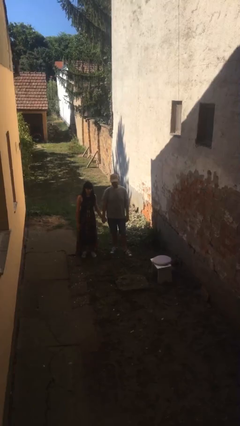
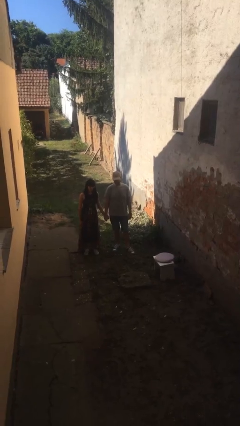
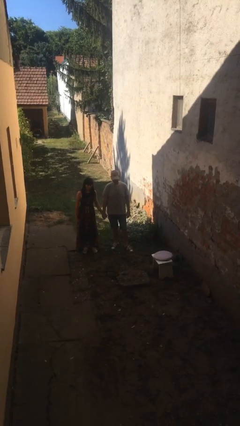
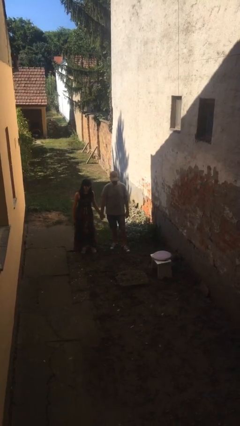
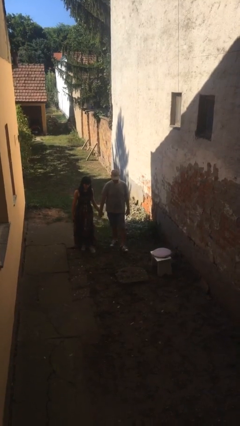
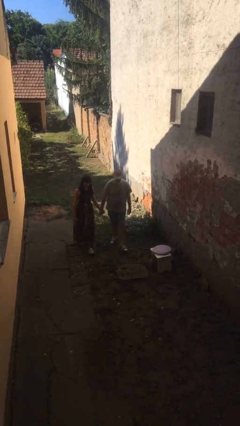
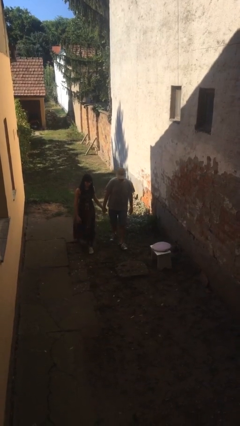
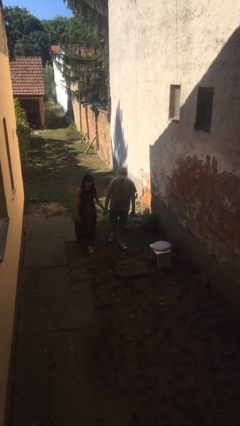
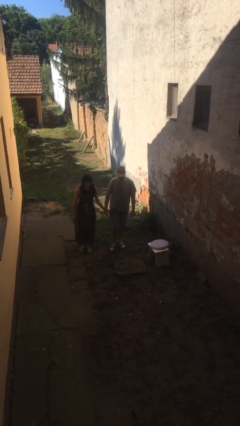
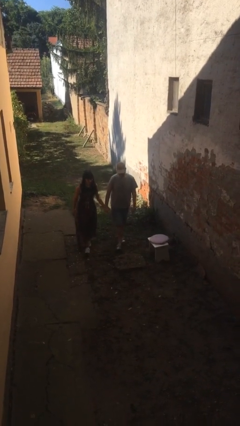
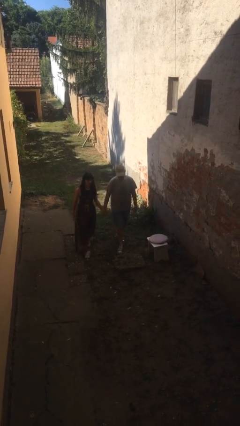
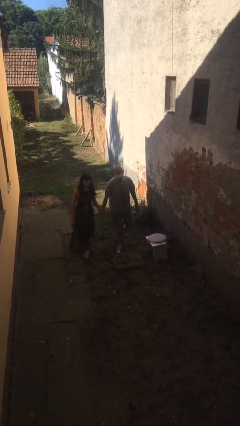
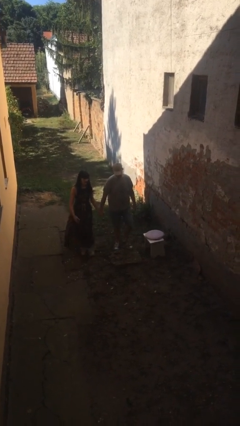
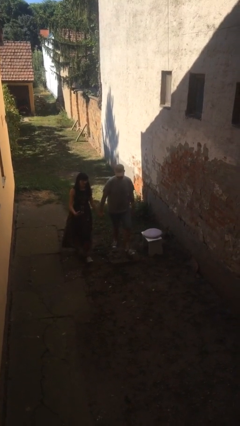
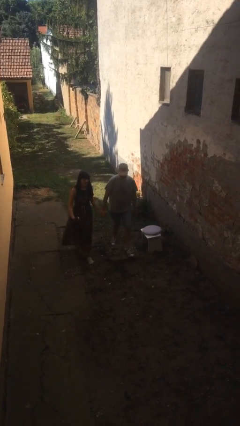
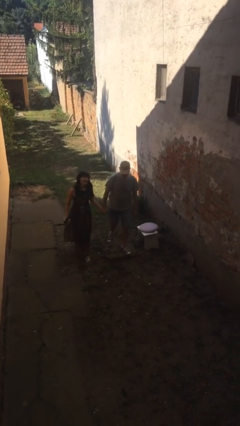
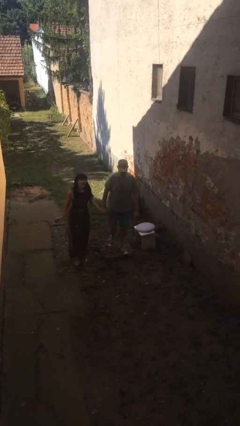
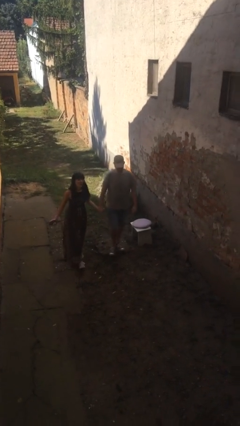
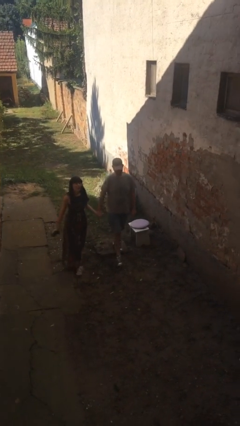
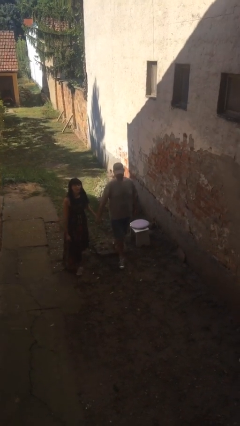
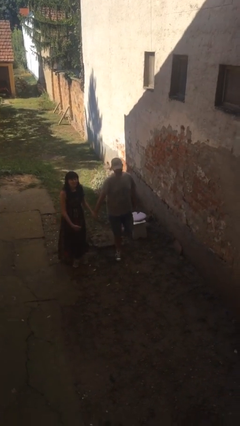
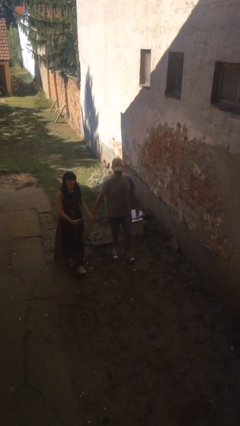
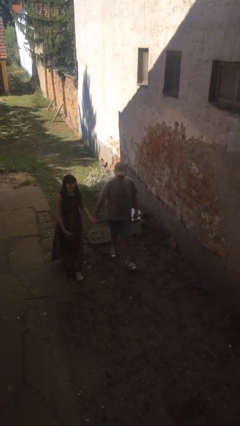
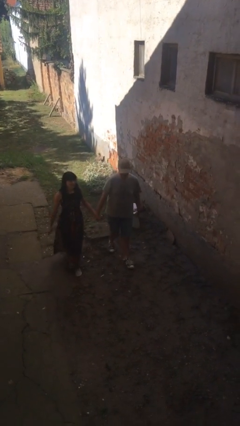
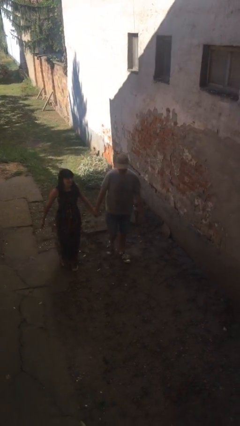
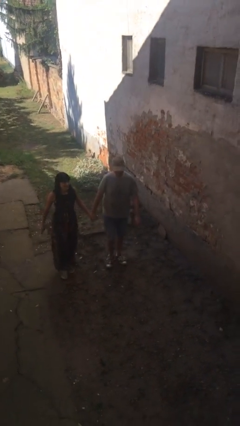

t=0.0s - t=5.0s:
person holds hand

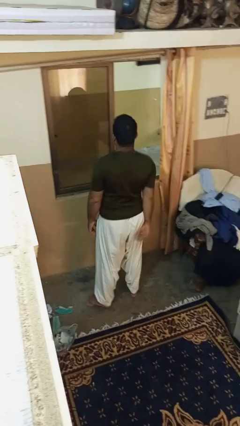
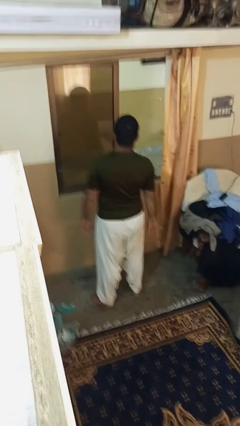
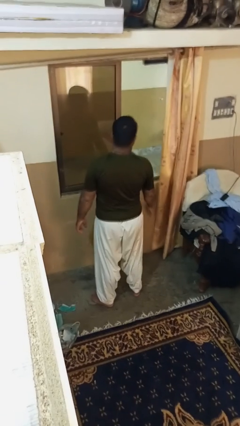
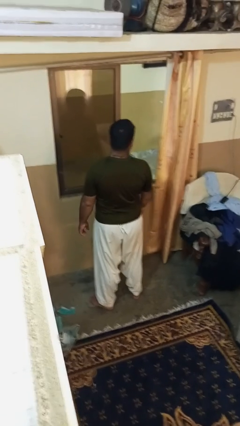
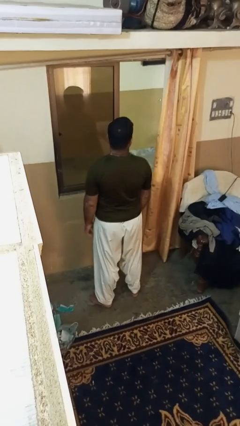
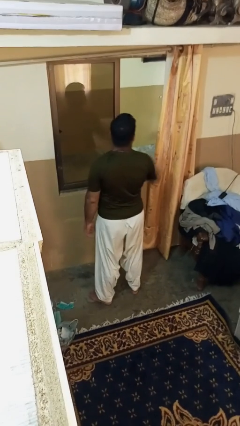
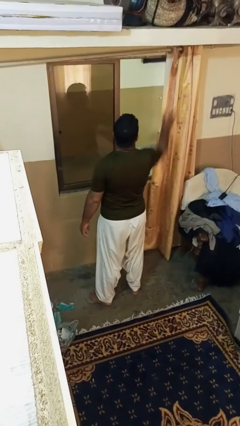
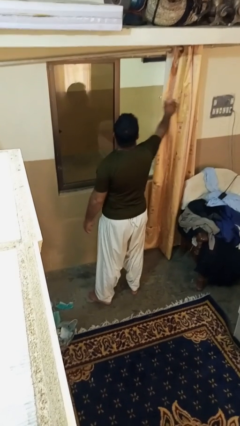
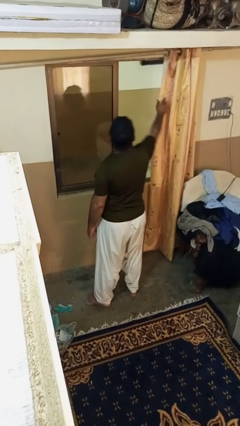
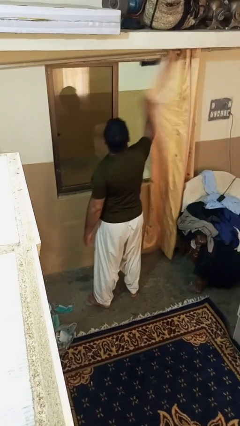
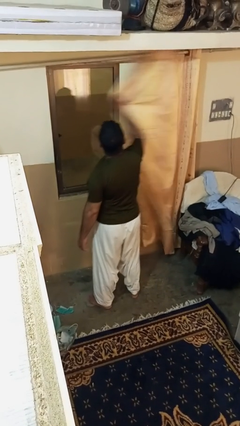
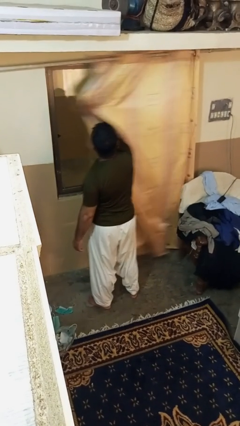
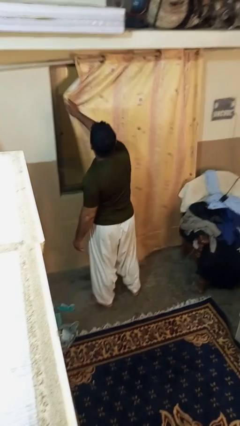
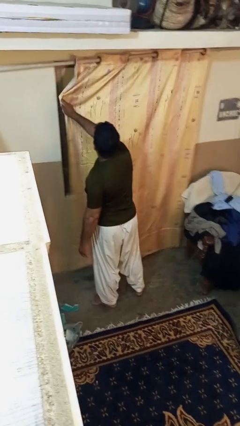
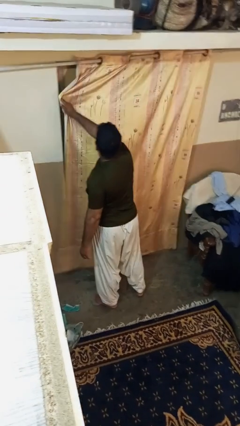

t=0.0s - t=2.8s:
person closes curtains

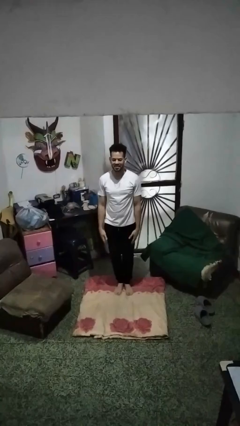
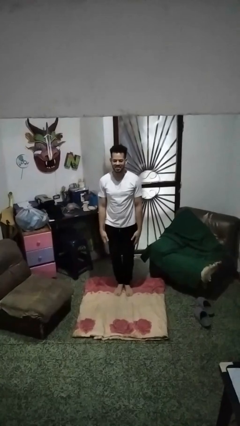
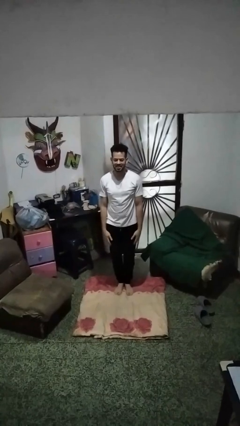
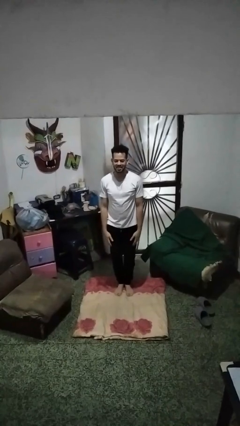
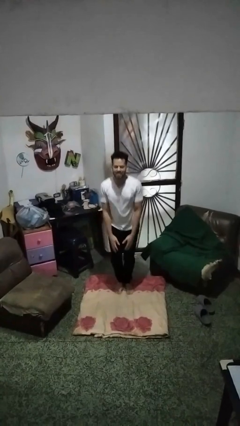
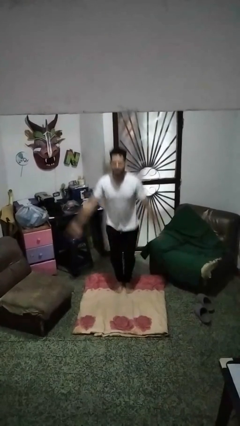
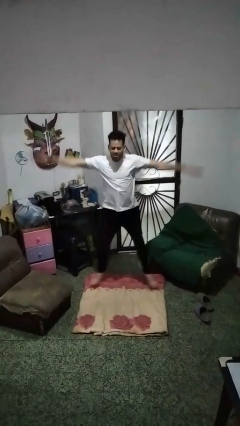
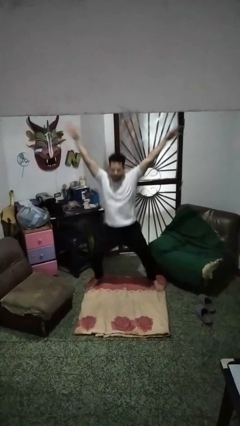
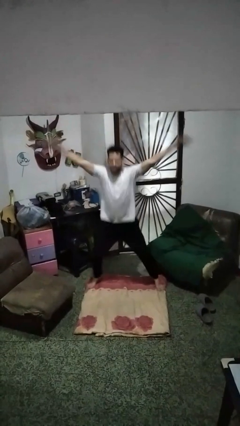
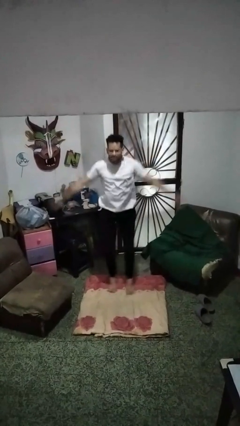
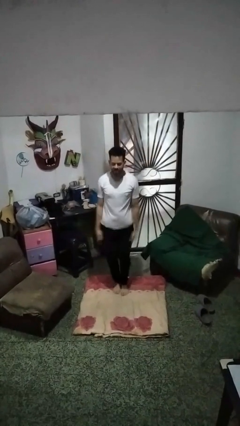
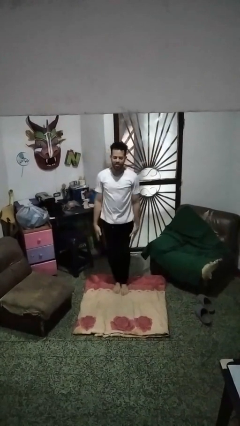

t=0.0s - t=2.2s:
person exercises with jumping jacks

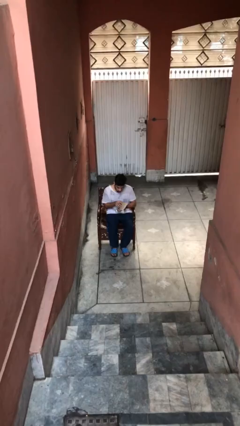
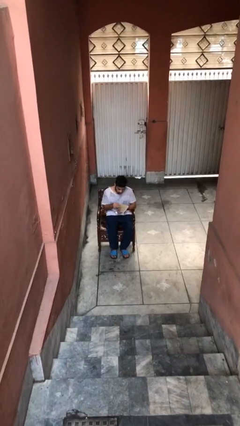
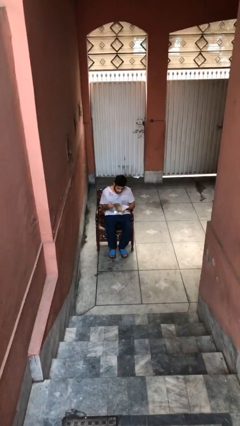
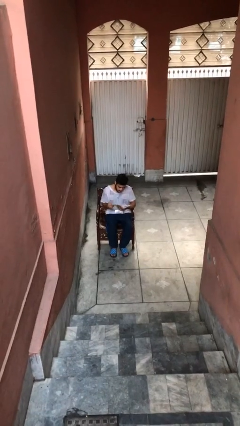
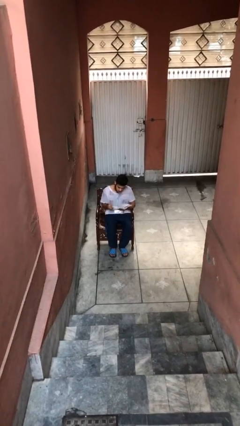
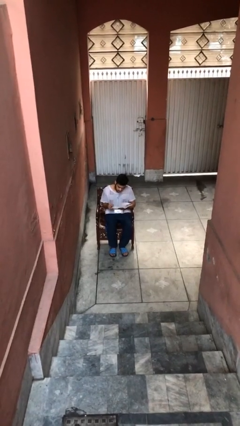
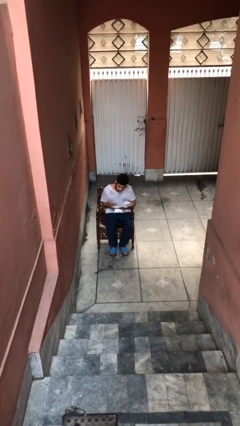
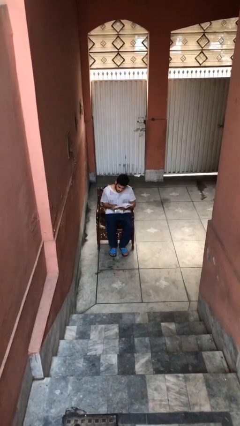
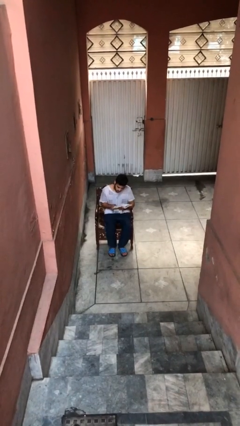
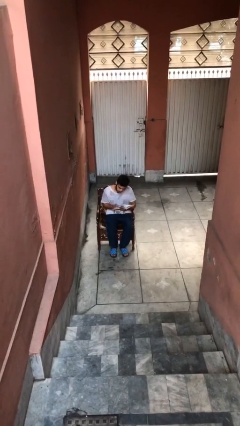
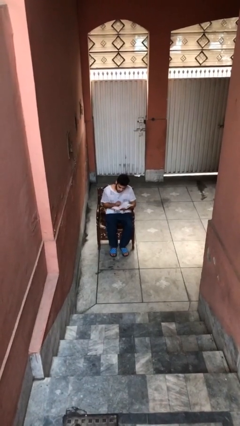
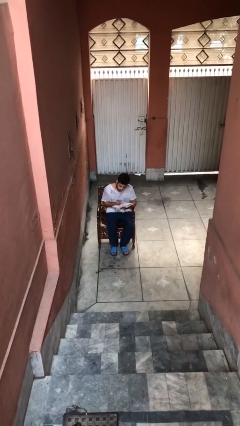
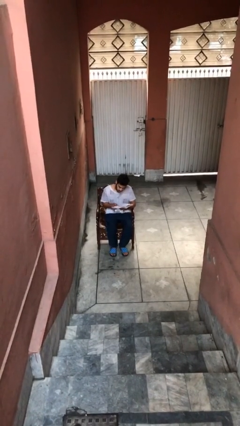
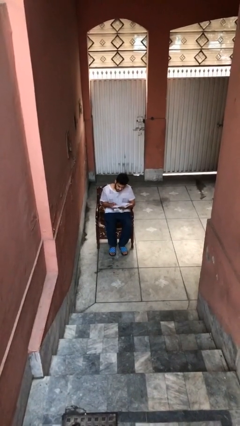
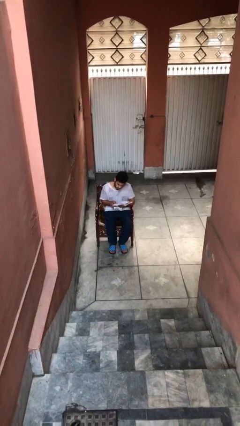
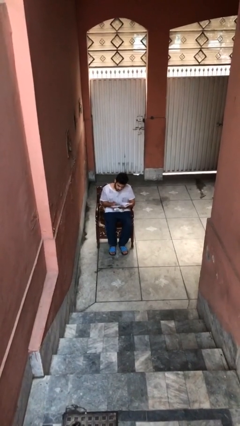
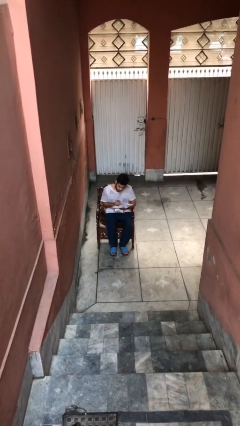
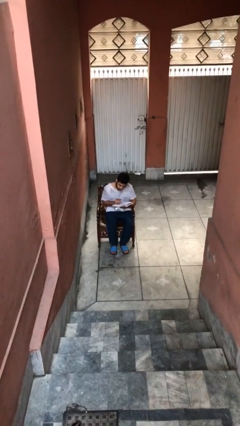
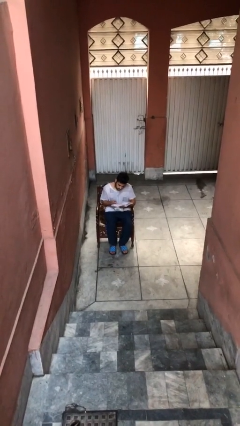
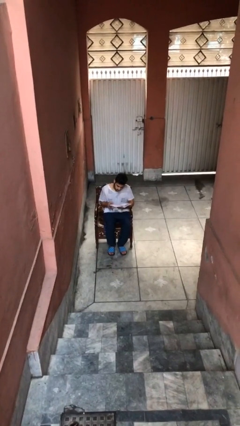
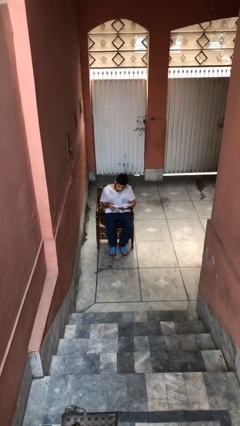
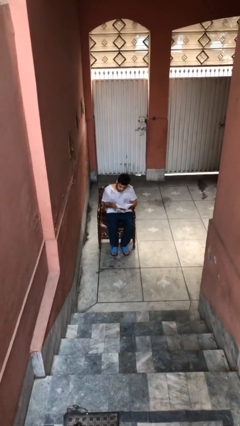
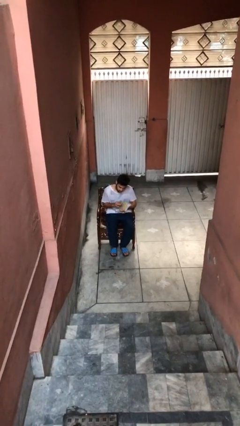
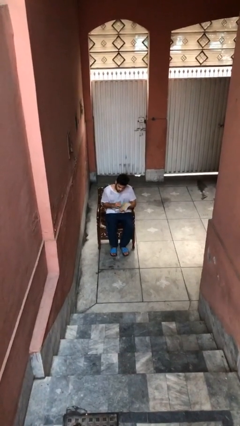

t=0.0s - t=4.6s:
person reads document

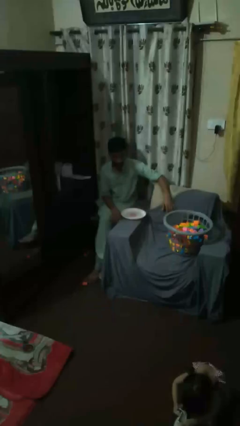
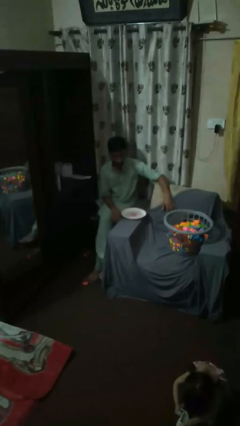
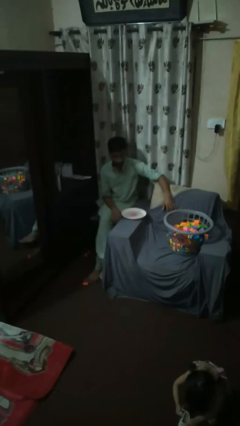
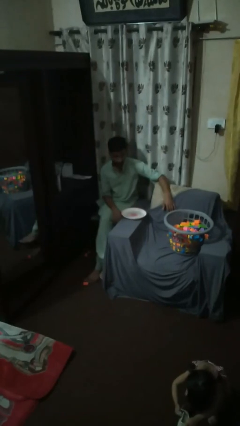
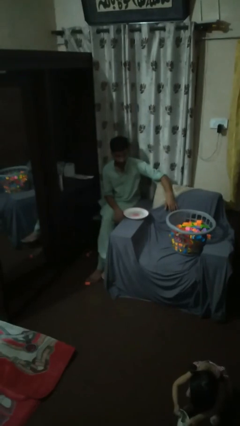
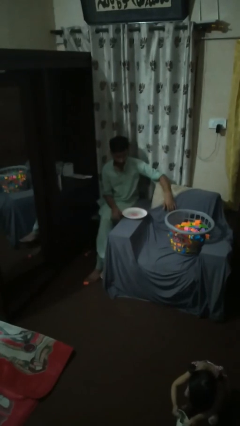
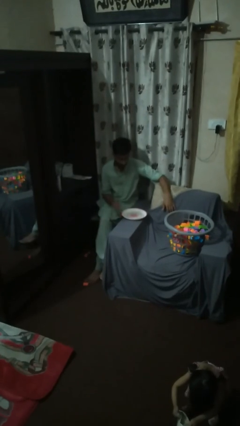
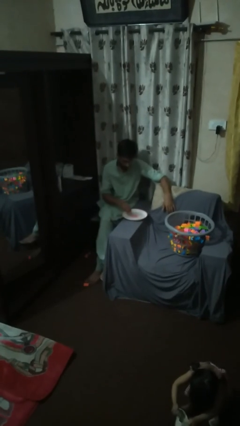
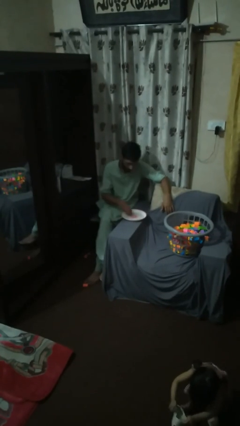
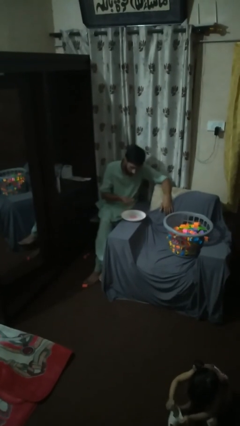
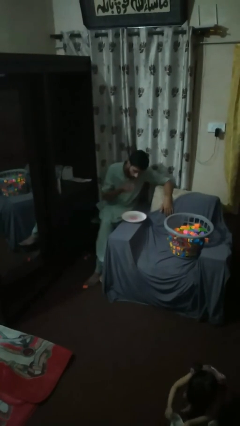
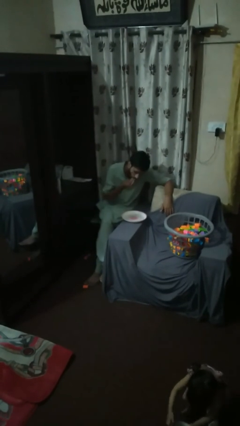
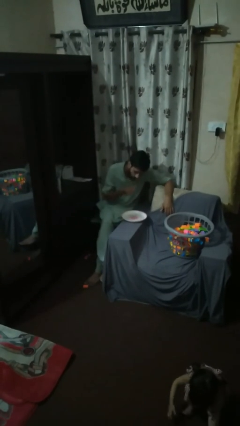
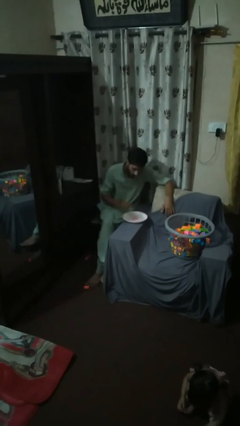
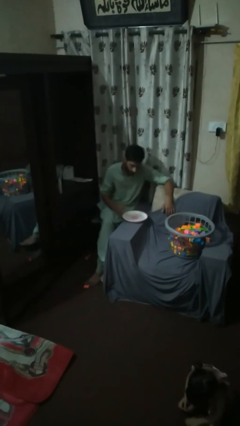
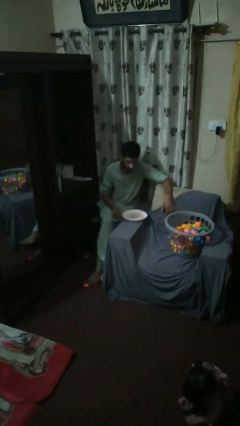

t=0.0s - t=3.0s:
person eats with hands
